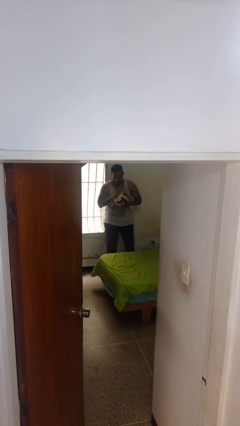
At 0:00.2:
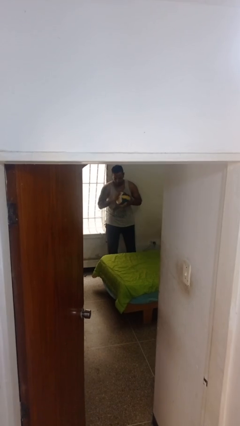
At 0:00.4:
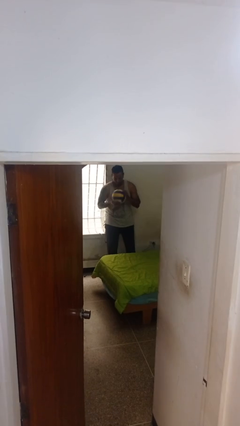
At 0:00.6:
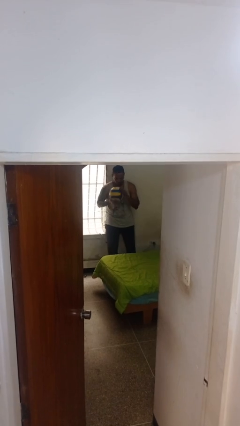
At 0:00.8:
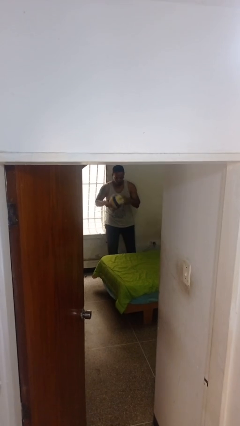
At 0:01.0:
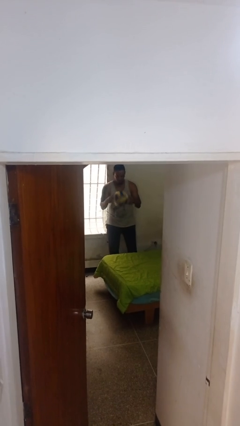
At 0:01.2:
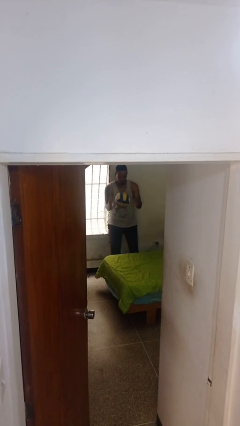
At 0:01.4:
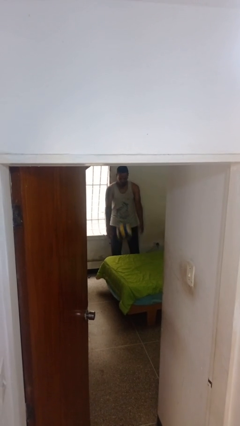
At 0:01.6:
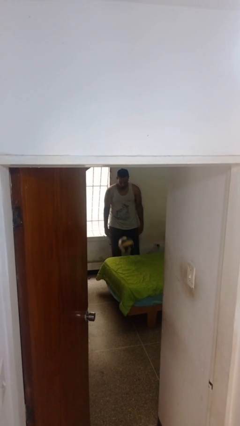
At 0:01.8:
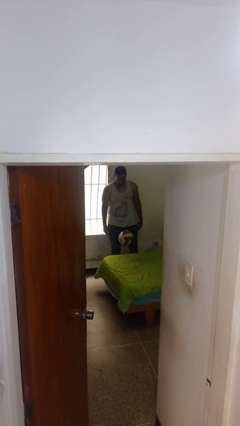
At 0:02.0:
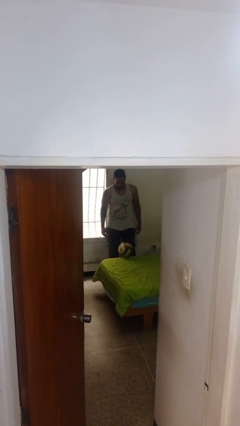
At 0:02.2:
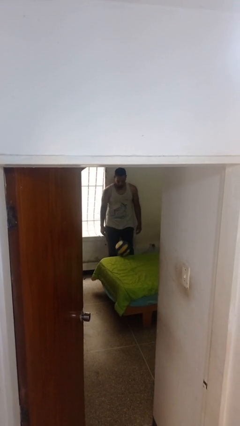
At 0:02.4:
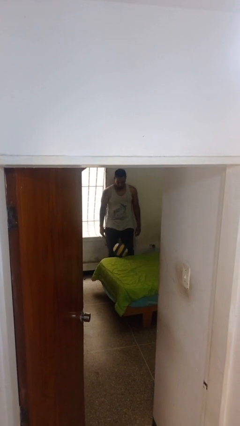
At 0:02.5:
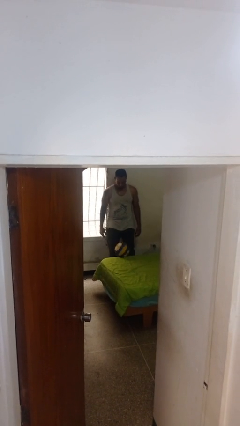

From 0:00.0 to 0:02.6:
person throws object on bed

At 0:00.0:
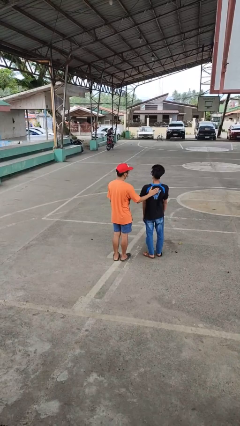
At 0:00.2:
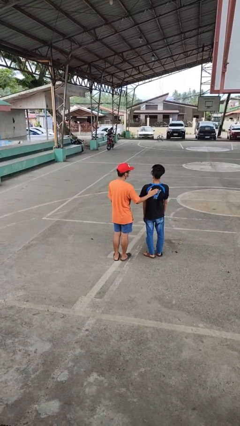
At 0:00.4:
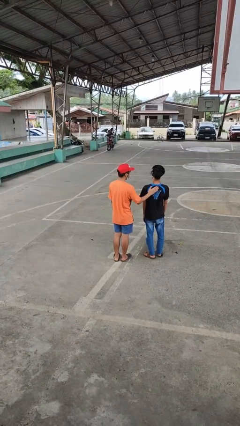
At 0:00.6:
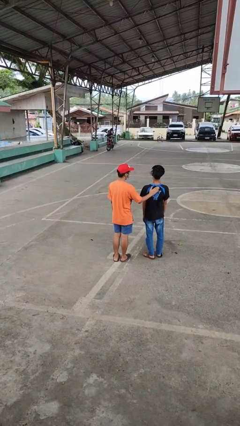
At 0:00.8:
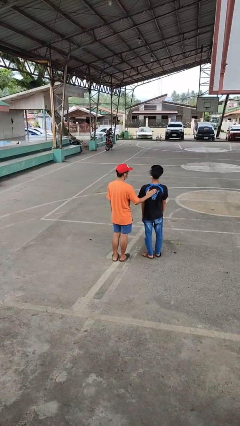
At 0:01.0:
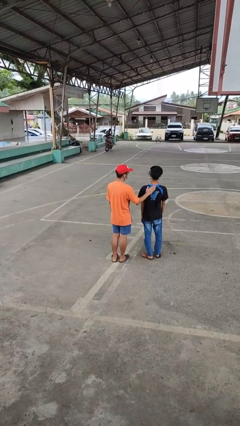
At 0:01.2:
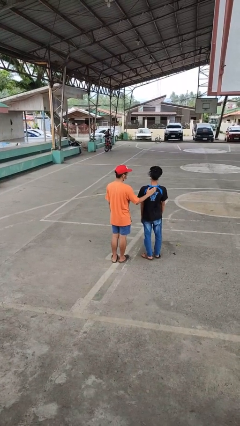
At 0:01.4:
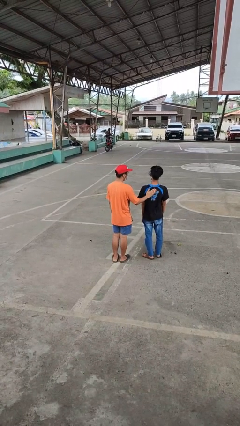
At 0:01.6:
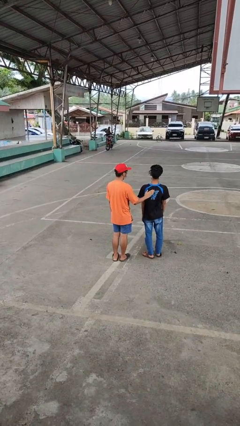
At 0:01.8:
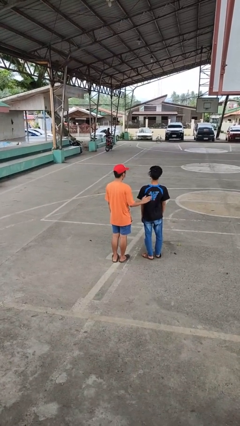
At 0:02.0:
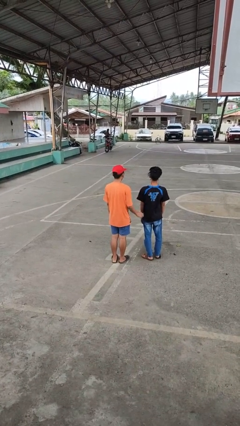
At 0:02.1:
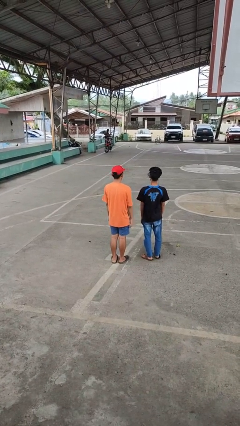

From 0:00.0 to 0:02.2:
person touches back of person

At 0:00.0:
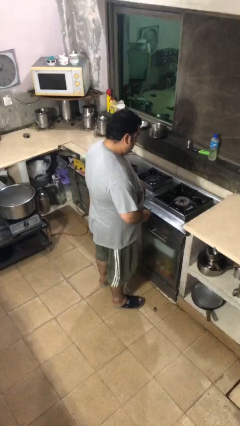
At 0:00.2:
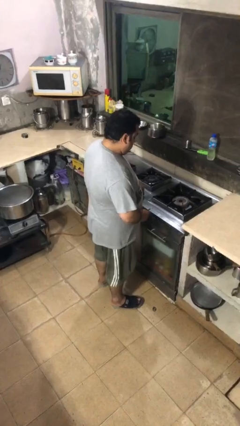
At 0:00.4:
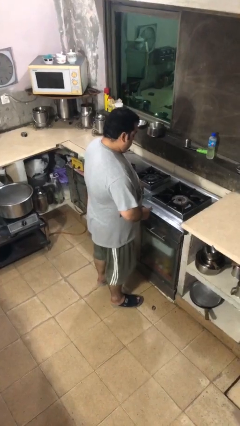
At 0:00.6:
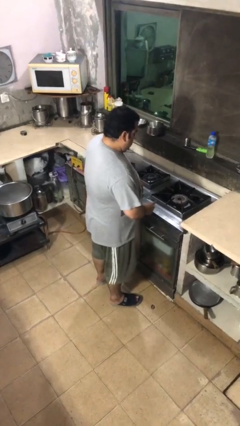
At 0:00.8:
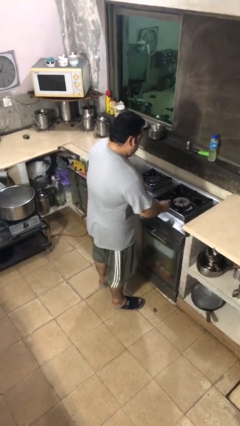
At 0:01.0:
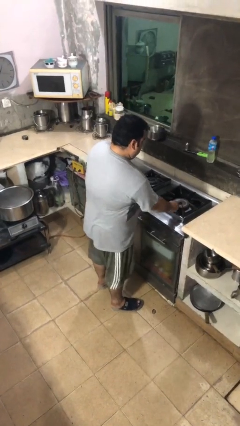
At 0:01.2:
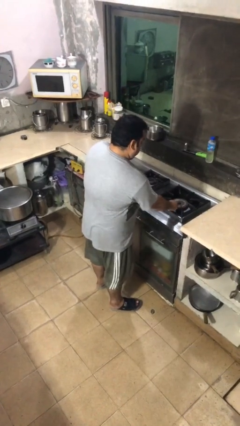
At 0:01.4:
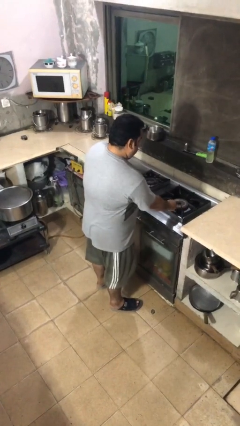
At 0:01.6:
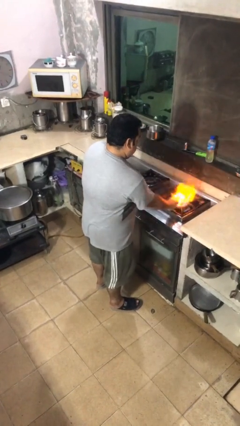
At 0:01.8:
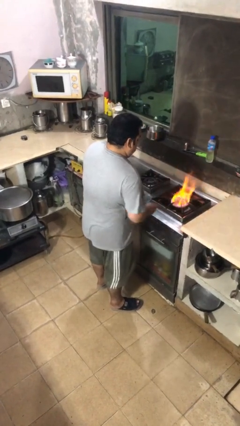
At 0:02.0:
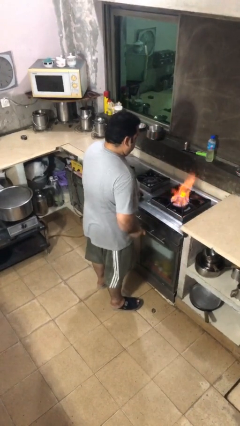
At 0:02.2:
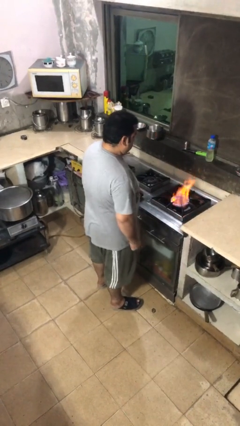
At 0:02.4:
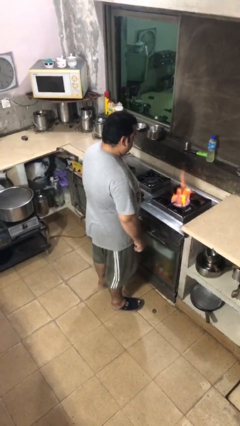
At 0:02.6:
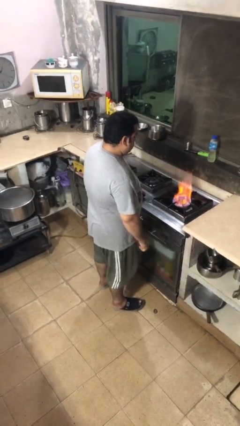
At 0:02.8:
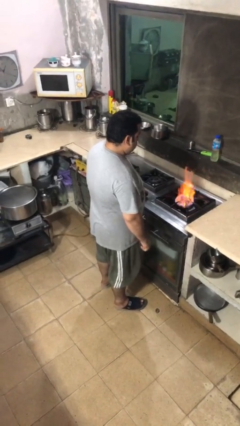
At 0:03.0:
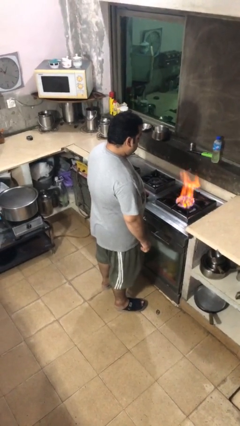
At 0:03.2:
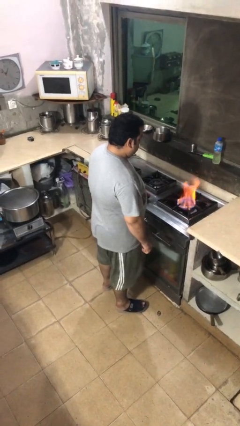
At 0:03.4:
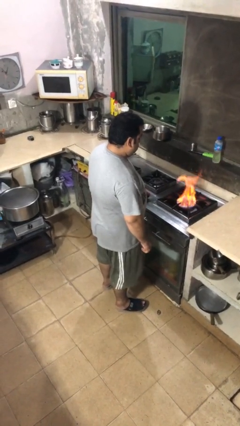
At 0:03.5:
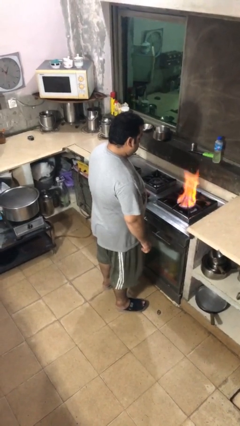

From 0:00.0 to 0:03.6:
person turns on stovetop

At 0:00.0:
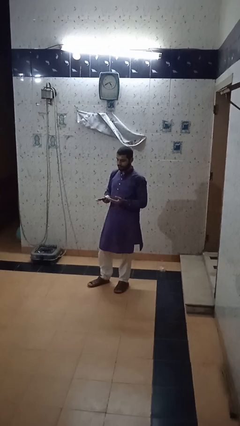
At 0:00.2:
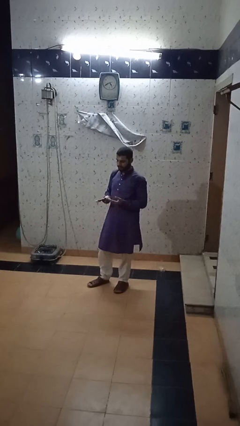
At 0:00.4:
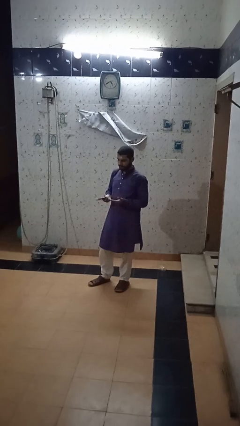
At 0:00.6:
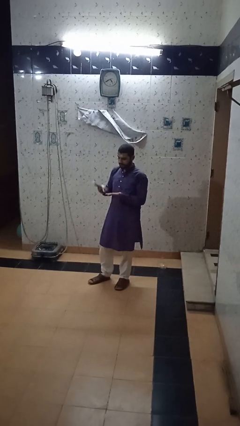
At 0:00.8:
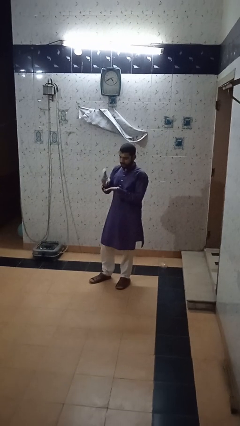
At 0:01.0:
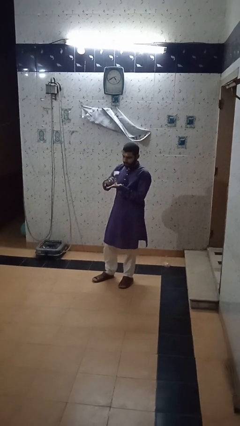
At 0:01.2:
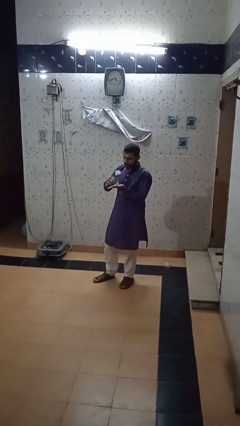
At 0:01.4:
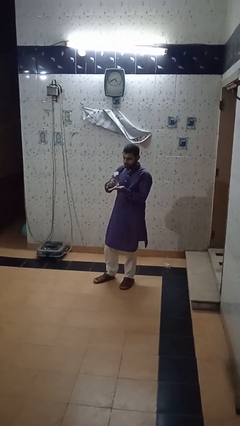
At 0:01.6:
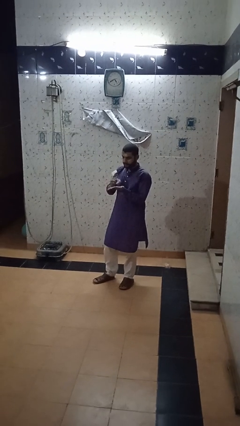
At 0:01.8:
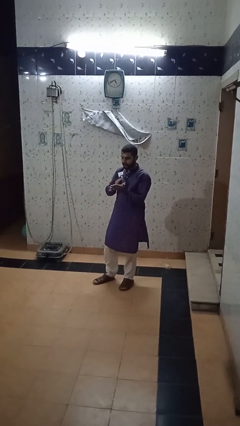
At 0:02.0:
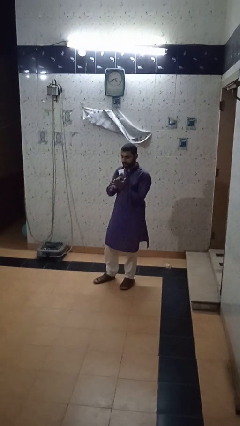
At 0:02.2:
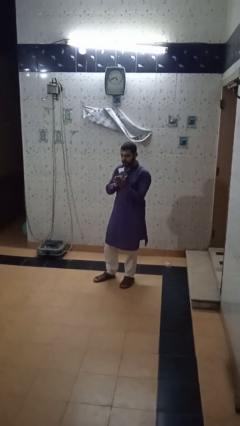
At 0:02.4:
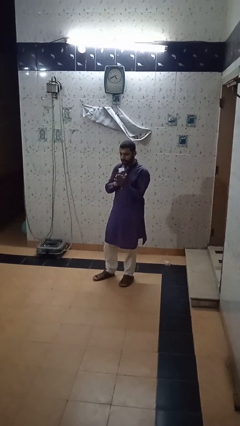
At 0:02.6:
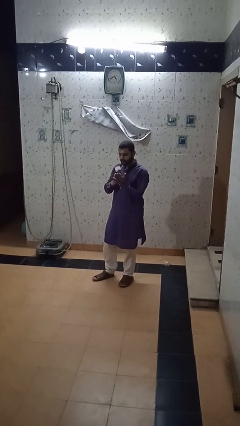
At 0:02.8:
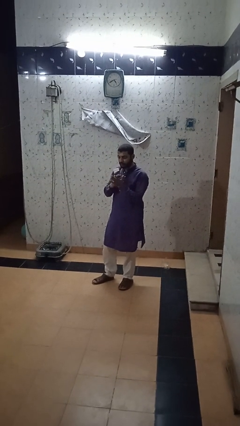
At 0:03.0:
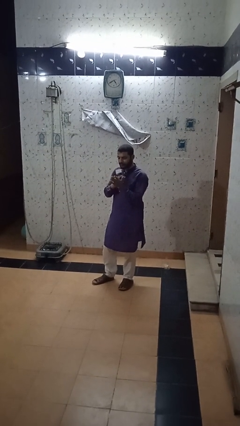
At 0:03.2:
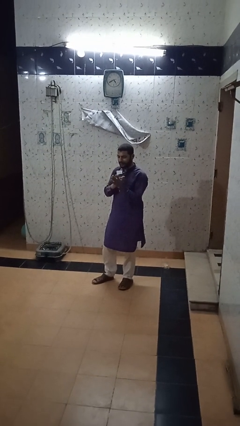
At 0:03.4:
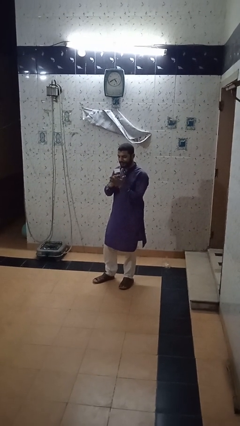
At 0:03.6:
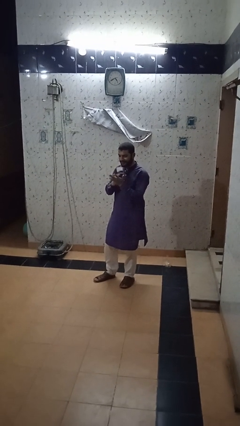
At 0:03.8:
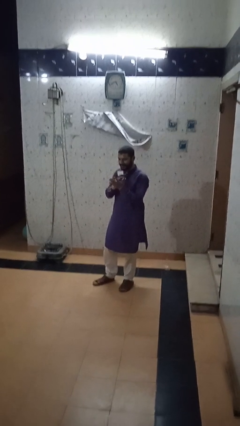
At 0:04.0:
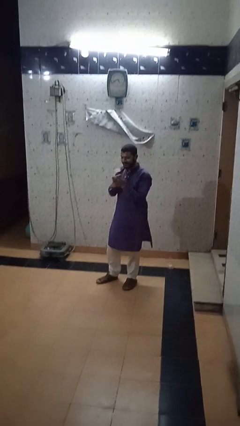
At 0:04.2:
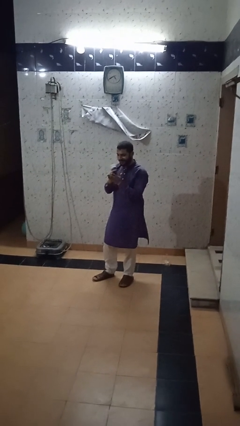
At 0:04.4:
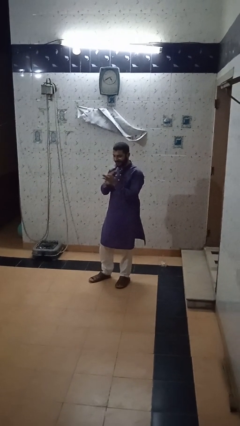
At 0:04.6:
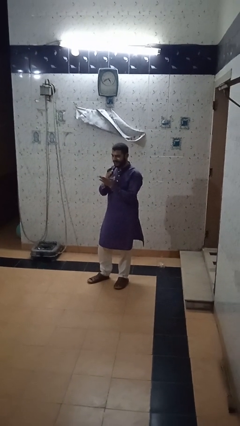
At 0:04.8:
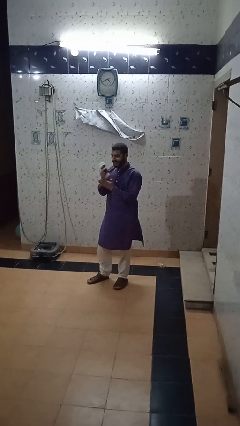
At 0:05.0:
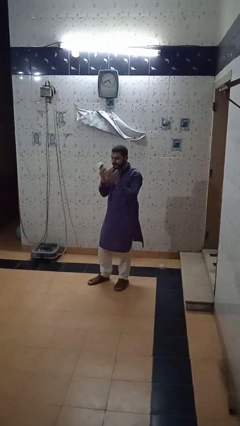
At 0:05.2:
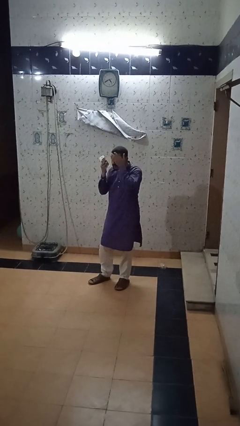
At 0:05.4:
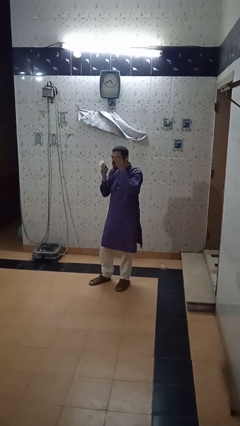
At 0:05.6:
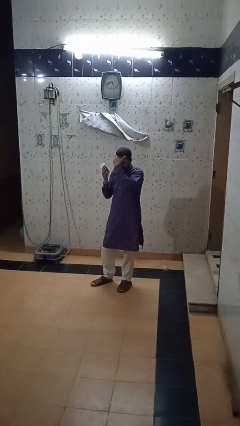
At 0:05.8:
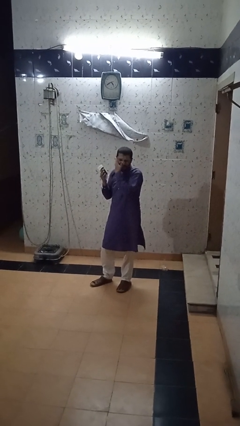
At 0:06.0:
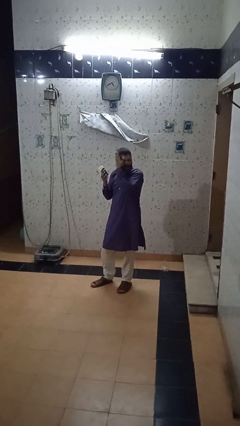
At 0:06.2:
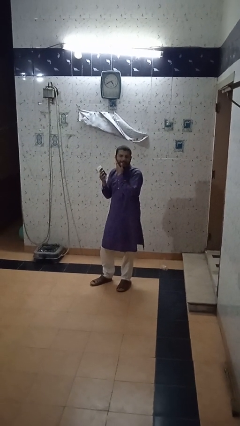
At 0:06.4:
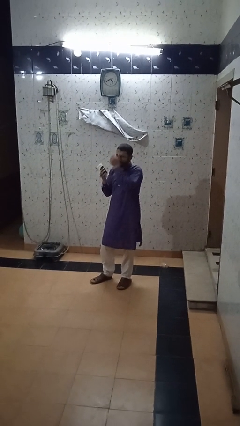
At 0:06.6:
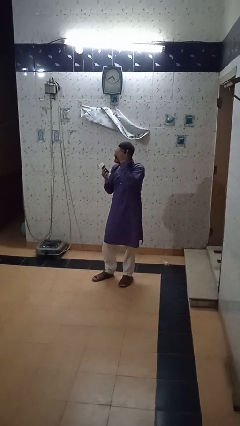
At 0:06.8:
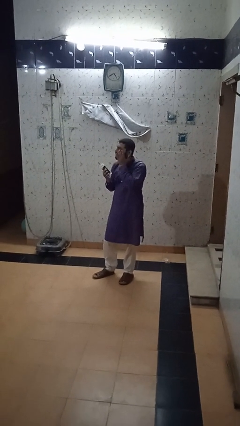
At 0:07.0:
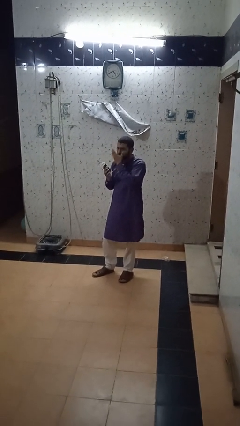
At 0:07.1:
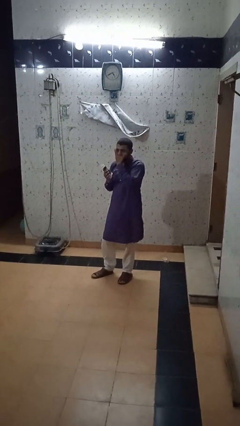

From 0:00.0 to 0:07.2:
person applies facial moisturizer

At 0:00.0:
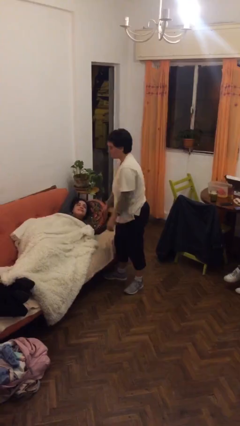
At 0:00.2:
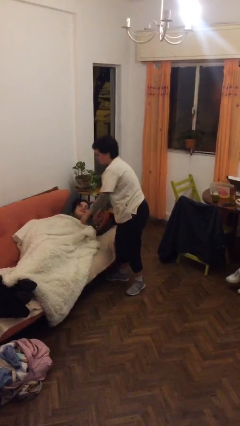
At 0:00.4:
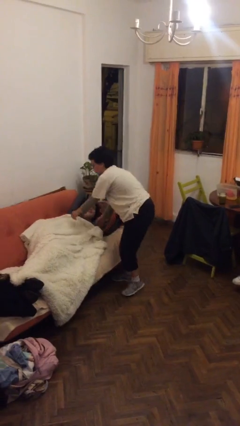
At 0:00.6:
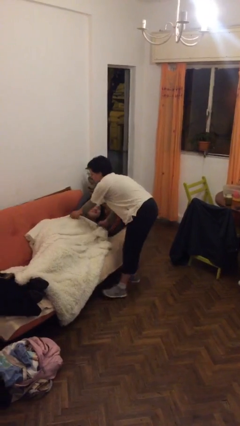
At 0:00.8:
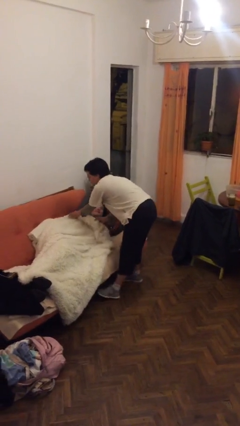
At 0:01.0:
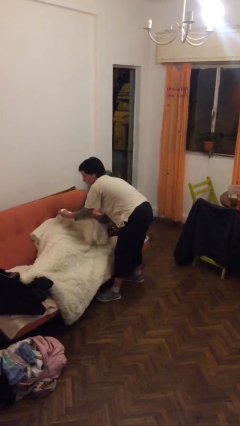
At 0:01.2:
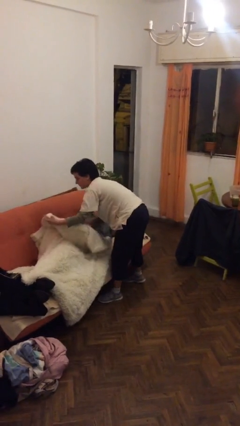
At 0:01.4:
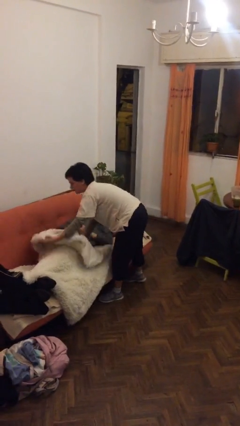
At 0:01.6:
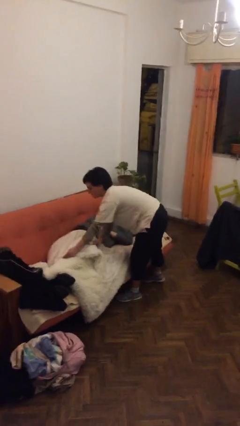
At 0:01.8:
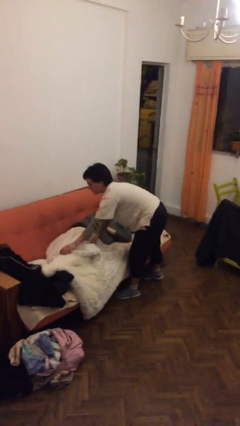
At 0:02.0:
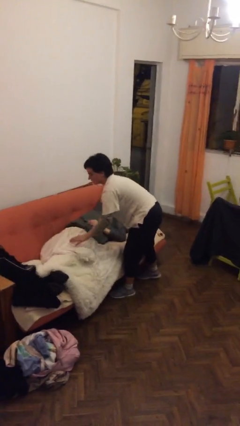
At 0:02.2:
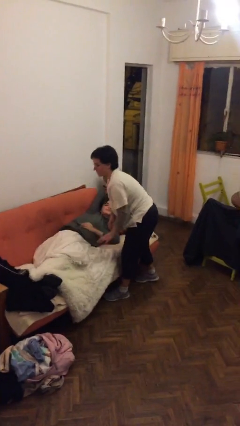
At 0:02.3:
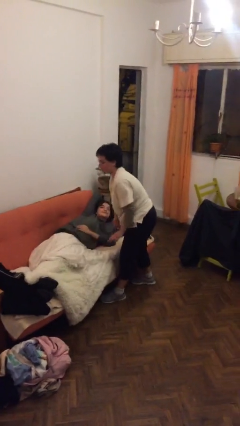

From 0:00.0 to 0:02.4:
person uncovers friend with blanket
